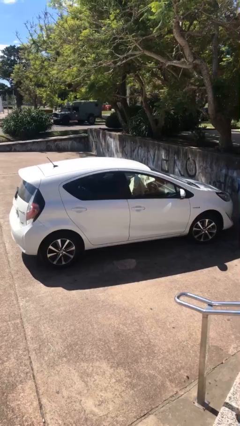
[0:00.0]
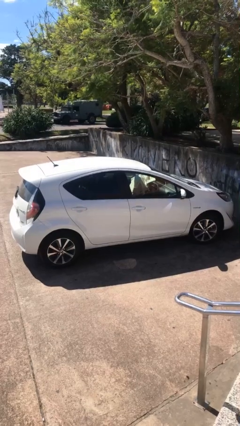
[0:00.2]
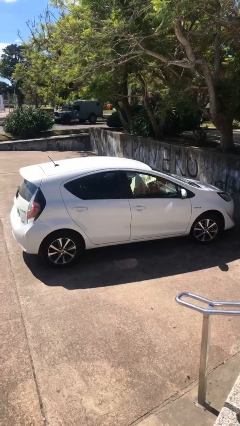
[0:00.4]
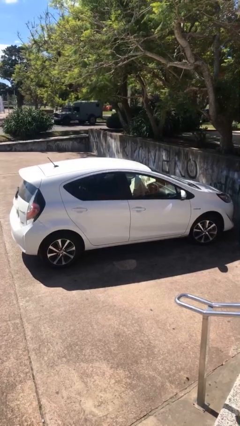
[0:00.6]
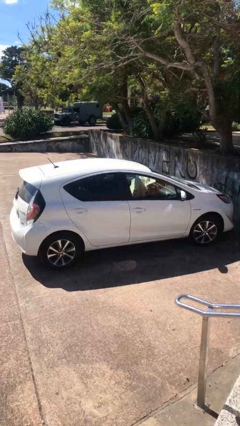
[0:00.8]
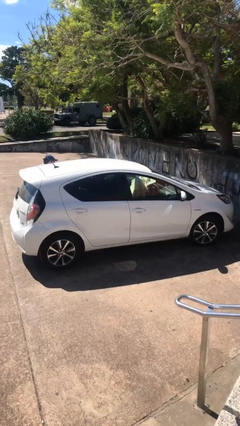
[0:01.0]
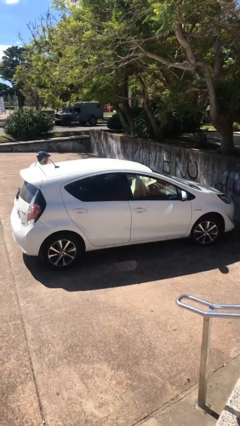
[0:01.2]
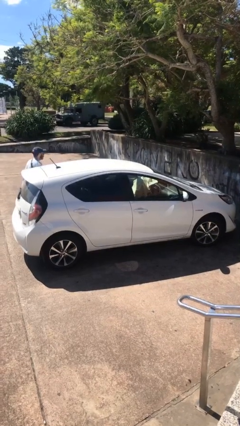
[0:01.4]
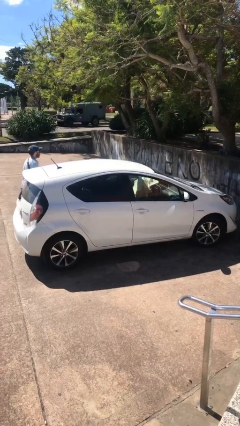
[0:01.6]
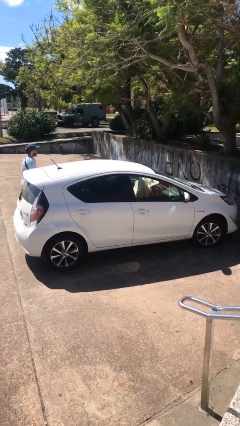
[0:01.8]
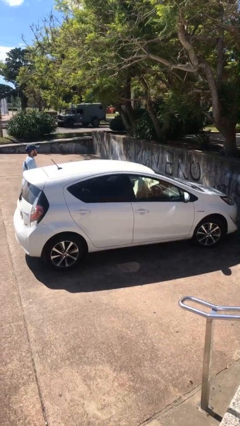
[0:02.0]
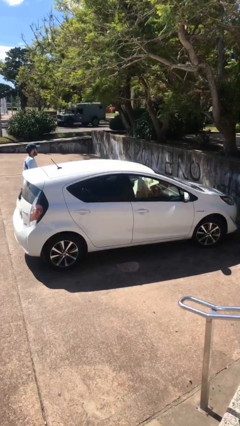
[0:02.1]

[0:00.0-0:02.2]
car drops off person

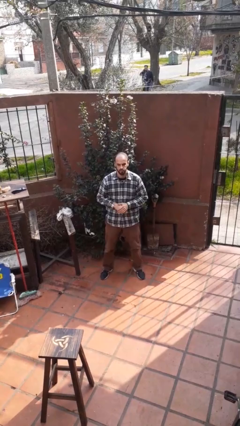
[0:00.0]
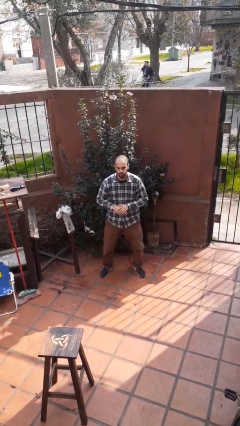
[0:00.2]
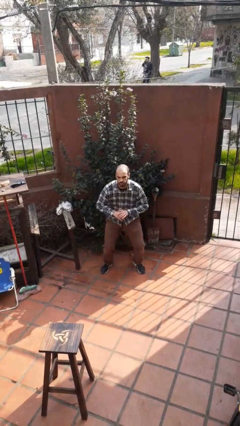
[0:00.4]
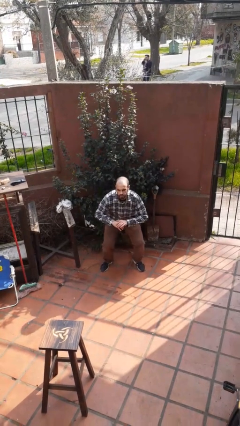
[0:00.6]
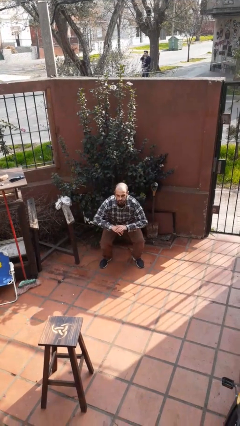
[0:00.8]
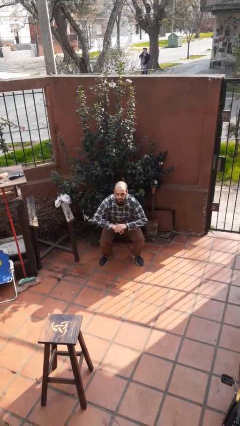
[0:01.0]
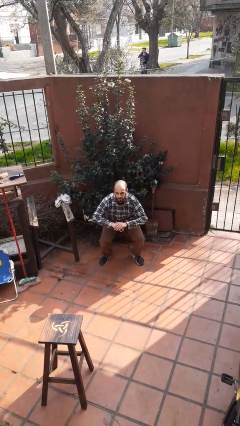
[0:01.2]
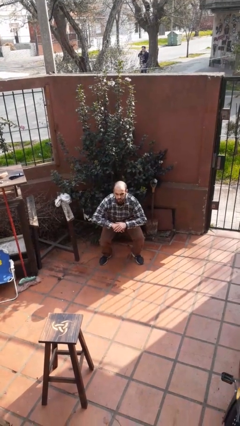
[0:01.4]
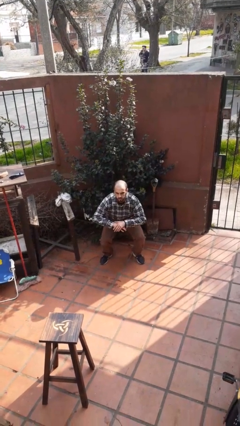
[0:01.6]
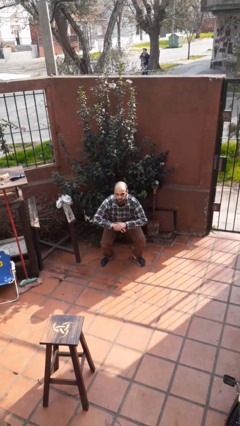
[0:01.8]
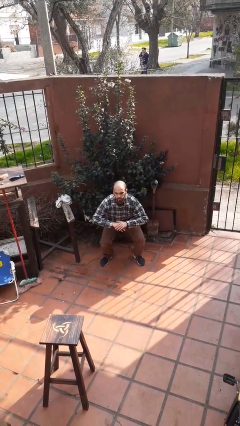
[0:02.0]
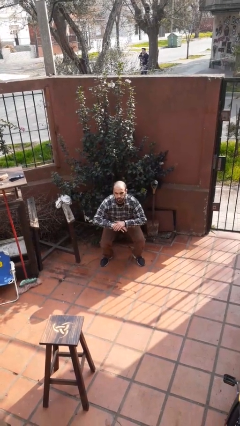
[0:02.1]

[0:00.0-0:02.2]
person squats

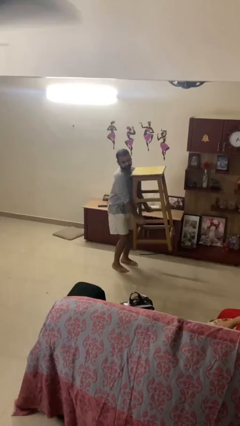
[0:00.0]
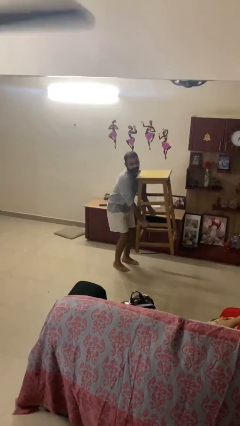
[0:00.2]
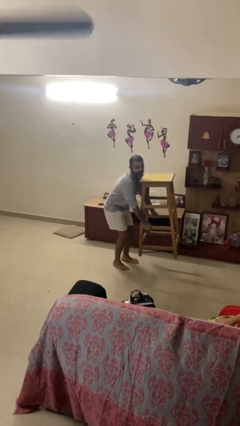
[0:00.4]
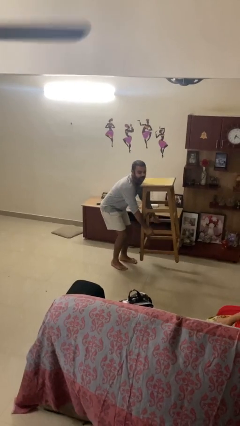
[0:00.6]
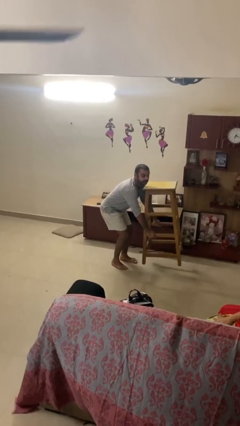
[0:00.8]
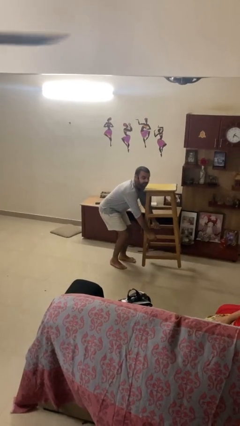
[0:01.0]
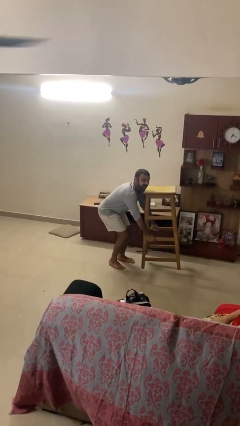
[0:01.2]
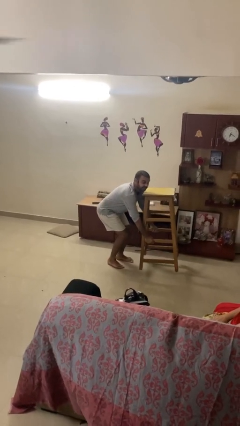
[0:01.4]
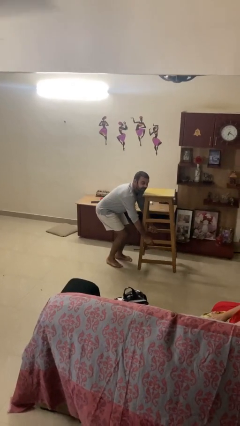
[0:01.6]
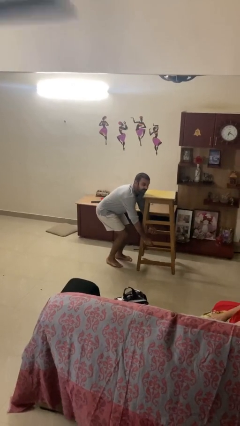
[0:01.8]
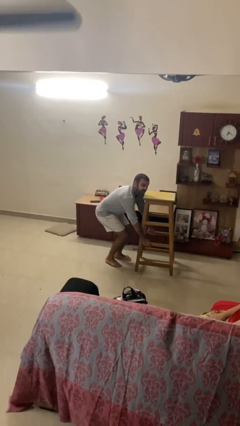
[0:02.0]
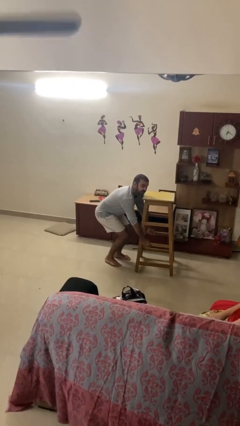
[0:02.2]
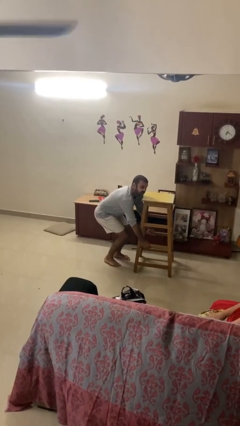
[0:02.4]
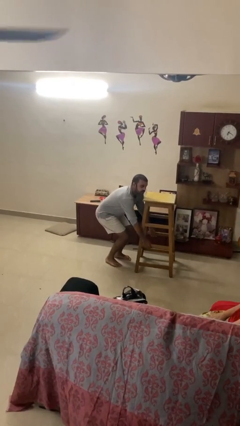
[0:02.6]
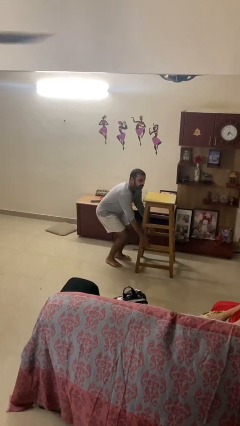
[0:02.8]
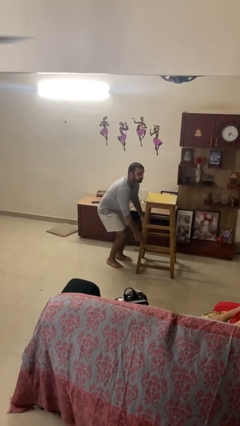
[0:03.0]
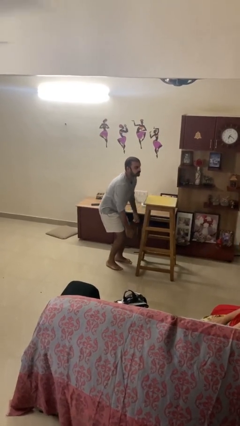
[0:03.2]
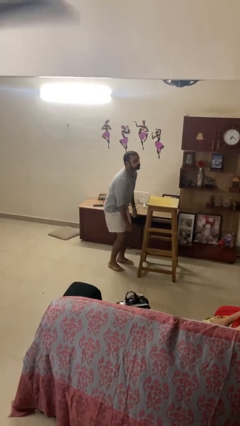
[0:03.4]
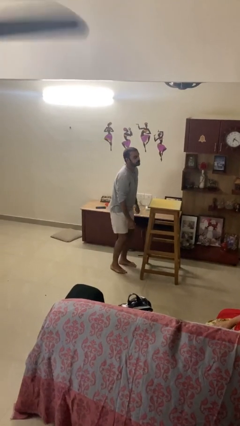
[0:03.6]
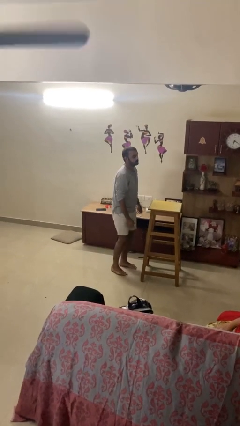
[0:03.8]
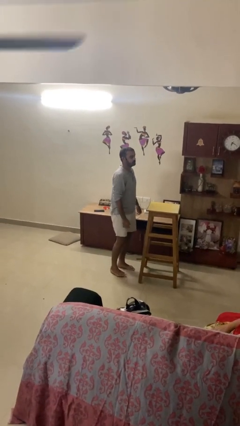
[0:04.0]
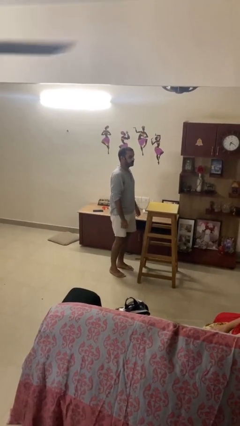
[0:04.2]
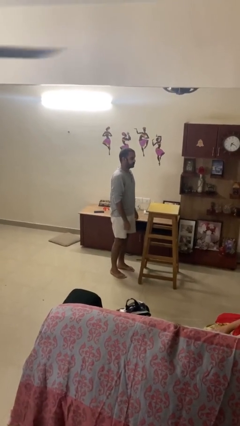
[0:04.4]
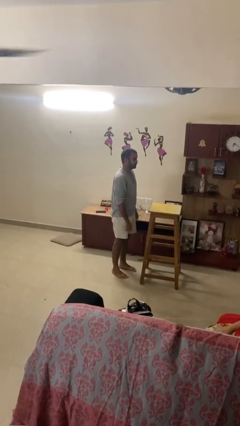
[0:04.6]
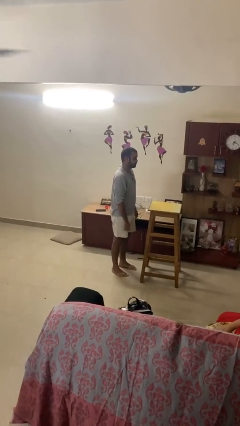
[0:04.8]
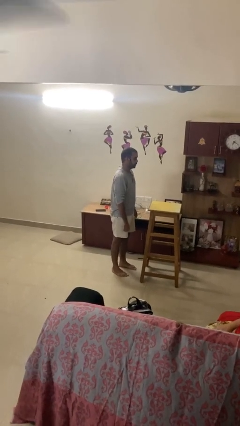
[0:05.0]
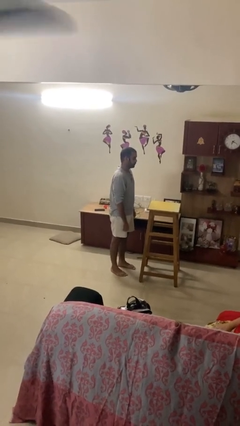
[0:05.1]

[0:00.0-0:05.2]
person puts down object on floor

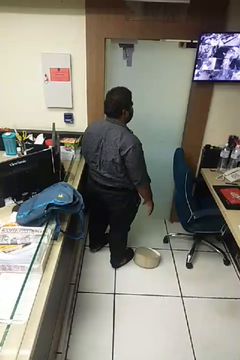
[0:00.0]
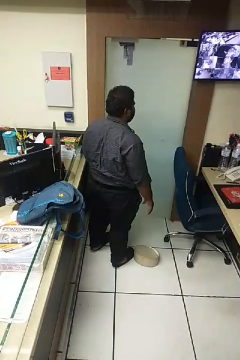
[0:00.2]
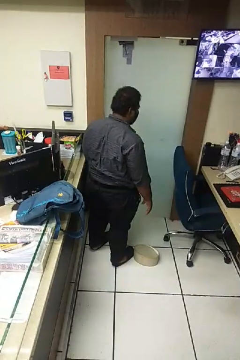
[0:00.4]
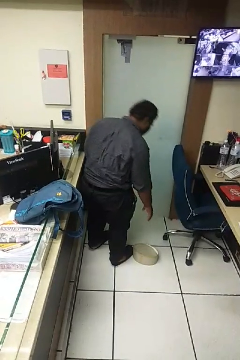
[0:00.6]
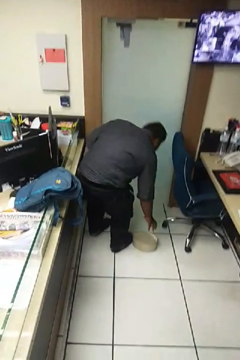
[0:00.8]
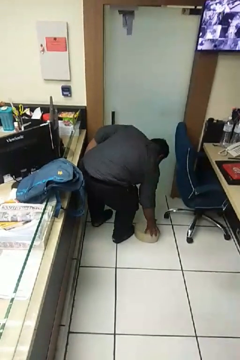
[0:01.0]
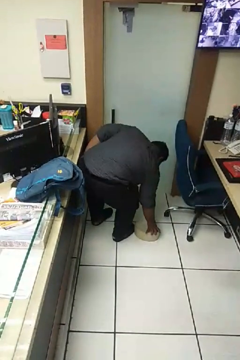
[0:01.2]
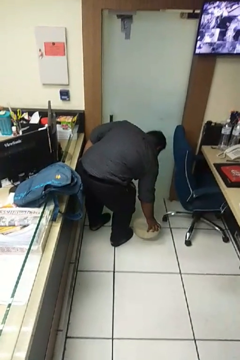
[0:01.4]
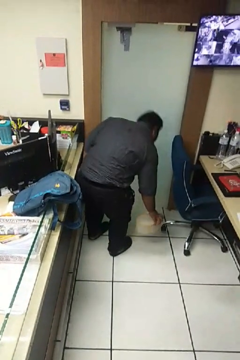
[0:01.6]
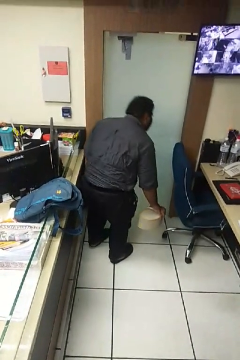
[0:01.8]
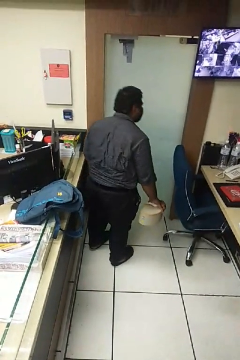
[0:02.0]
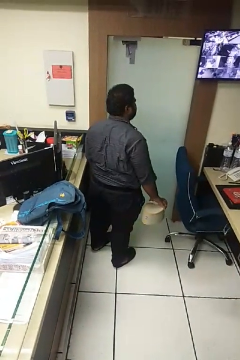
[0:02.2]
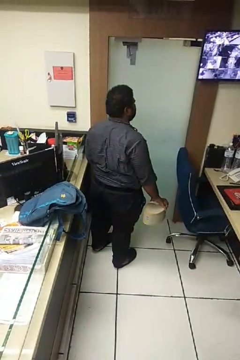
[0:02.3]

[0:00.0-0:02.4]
person picks up object from floor

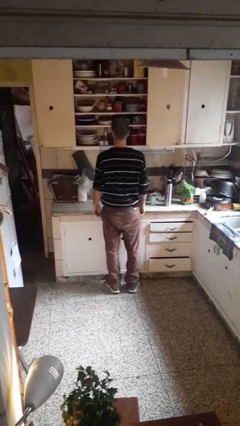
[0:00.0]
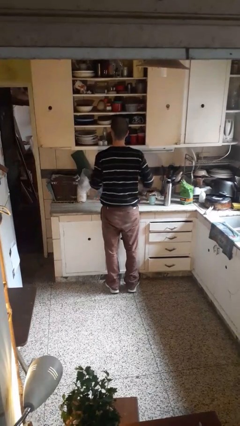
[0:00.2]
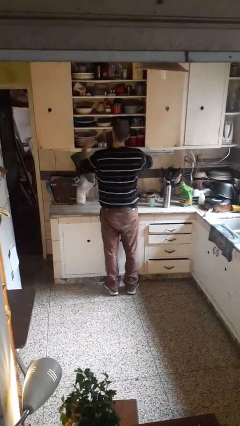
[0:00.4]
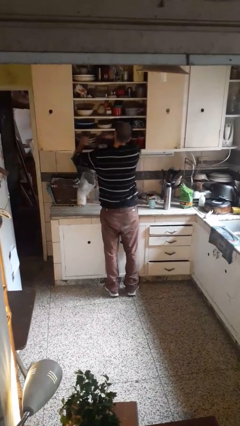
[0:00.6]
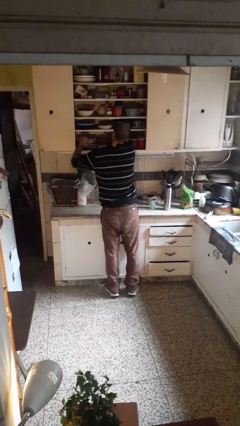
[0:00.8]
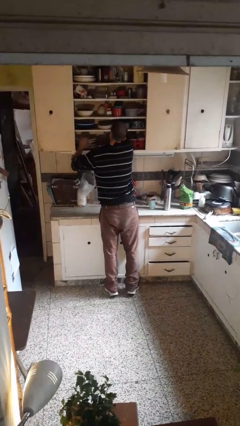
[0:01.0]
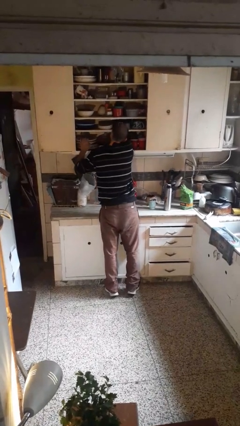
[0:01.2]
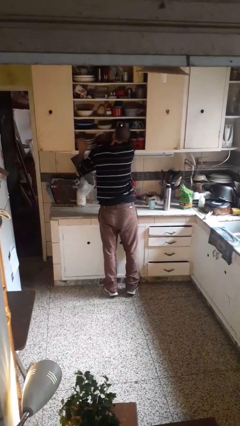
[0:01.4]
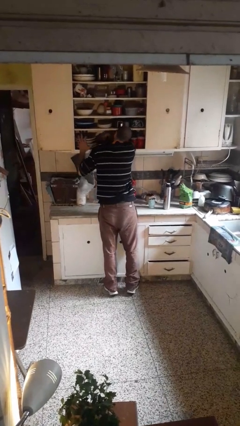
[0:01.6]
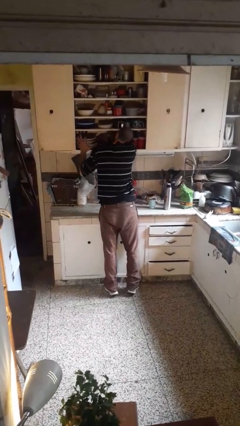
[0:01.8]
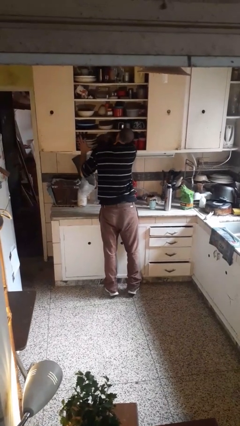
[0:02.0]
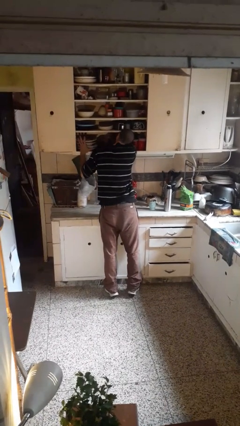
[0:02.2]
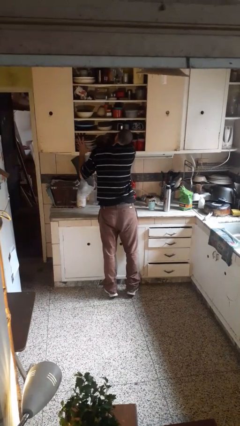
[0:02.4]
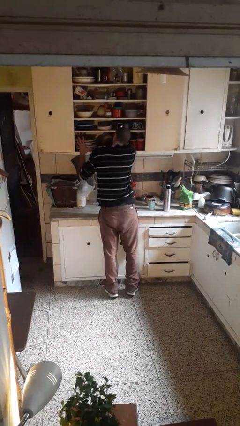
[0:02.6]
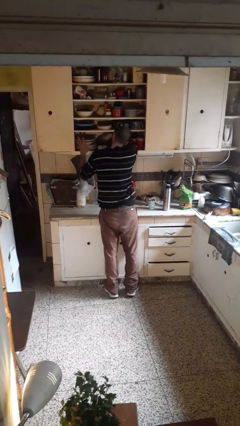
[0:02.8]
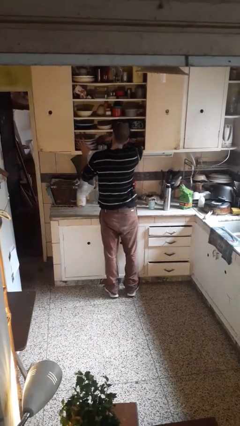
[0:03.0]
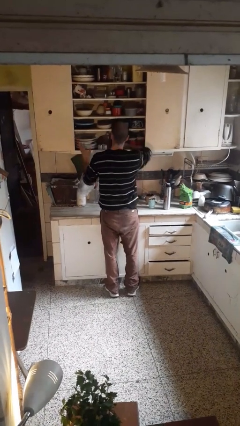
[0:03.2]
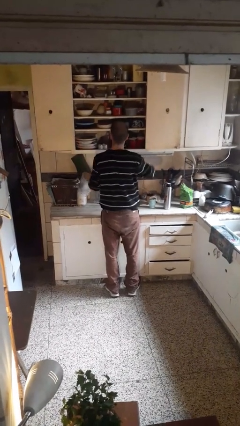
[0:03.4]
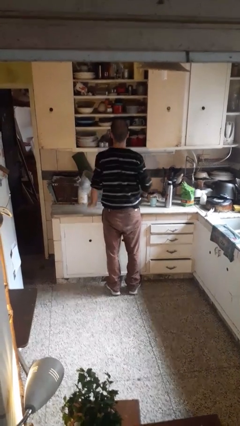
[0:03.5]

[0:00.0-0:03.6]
person searches in cabinet

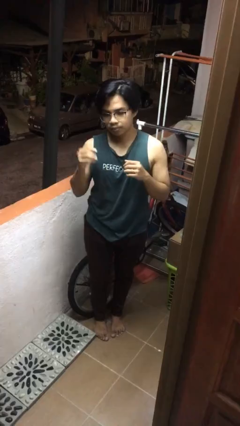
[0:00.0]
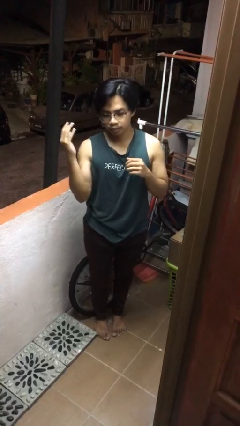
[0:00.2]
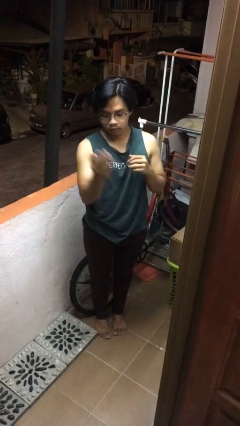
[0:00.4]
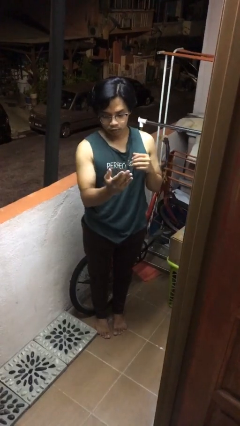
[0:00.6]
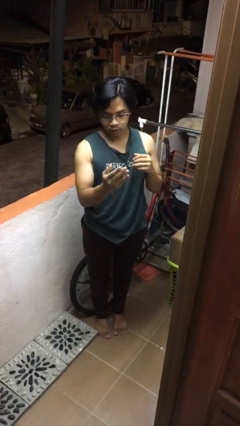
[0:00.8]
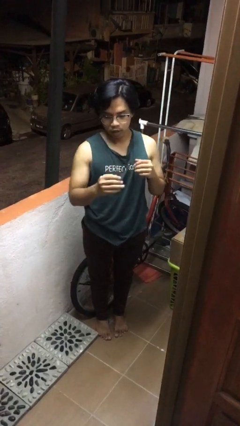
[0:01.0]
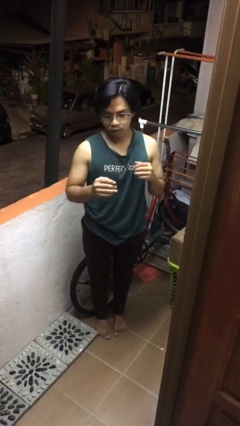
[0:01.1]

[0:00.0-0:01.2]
person karate chop

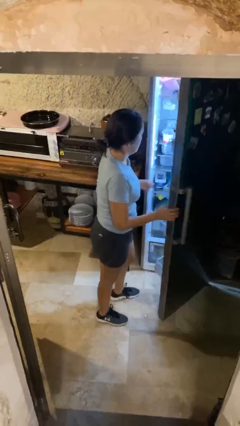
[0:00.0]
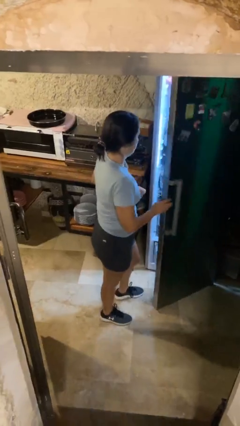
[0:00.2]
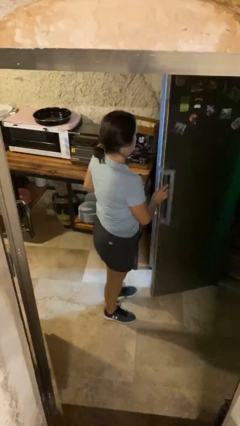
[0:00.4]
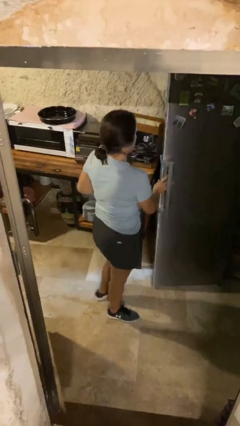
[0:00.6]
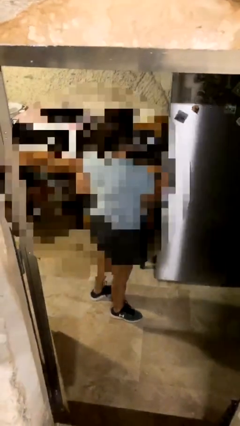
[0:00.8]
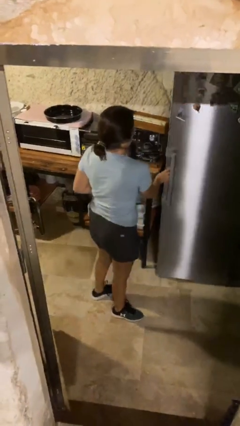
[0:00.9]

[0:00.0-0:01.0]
person closes refrigerator
